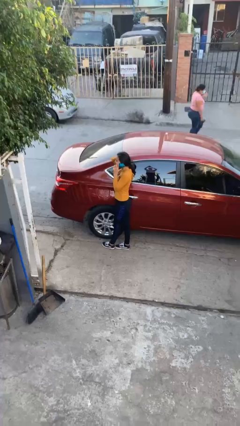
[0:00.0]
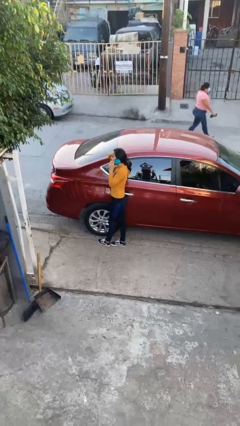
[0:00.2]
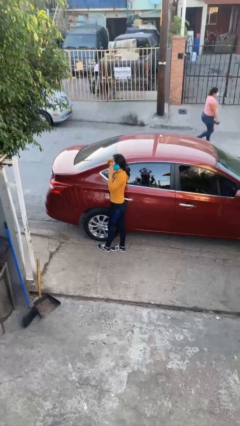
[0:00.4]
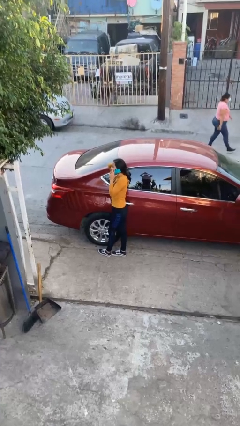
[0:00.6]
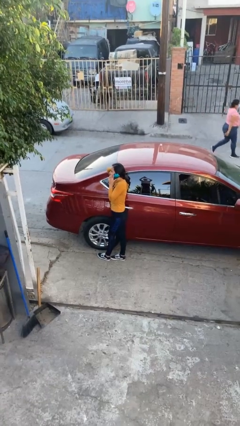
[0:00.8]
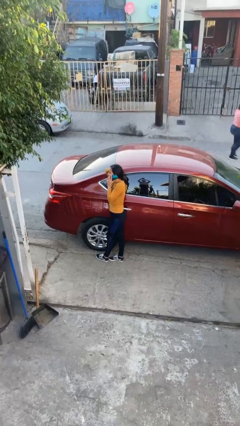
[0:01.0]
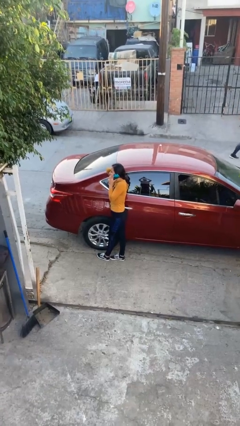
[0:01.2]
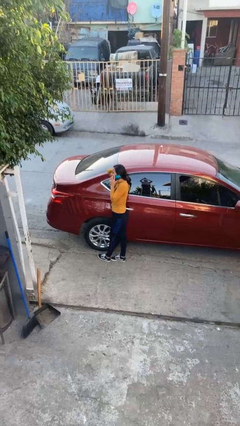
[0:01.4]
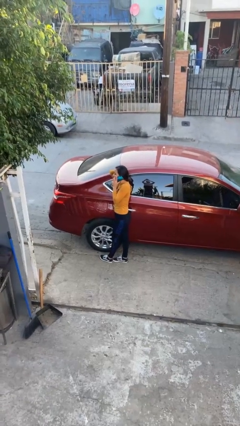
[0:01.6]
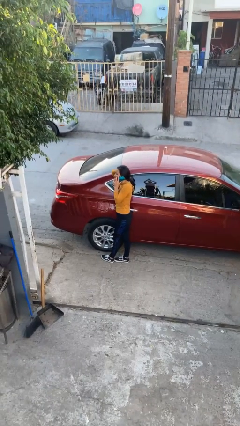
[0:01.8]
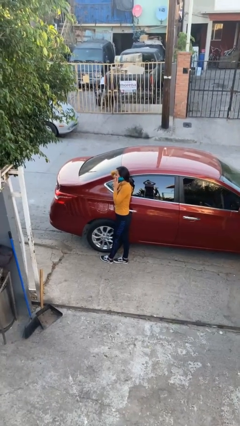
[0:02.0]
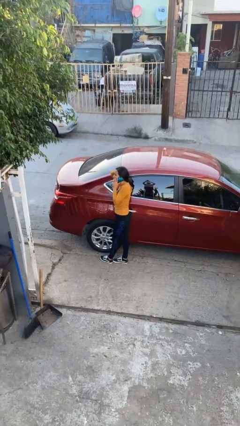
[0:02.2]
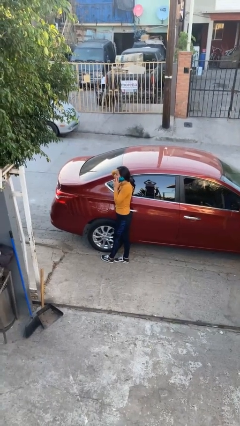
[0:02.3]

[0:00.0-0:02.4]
person leans against car

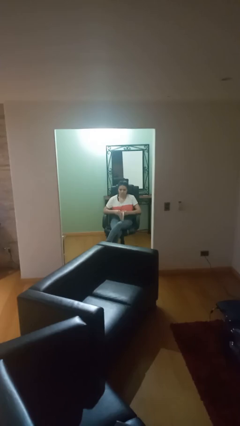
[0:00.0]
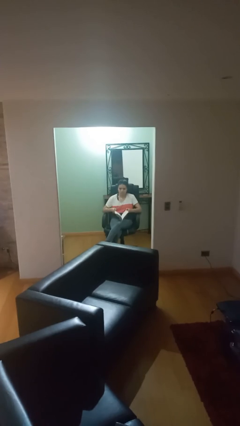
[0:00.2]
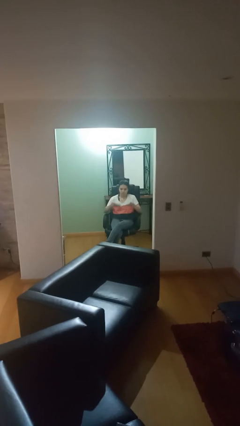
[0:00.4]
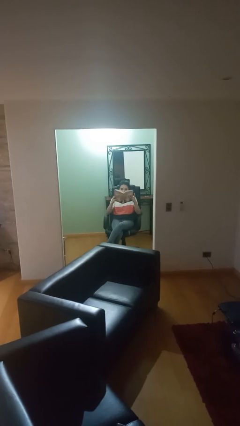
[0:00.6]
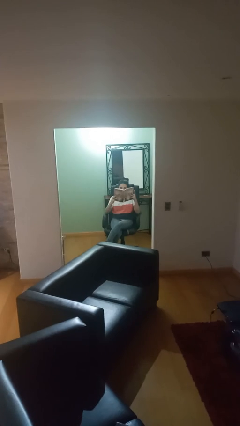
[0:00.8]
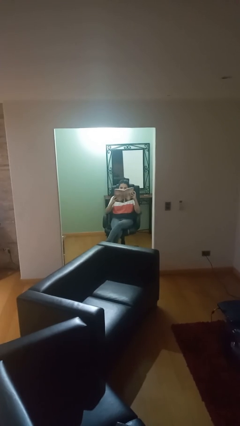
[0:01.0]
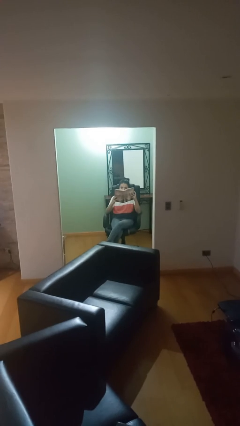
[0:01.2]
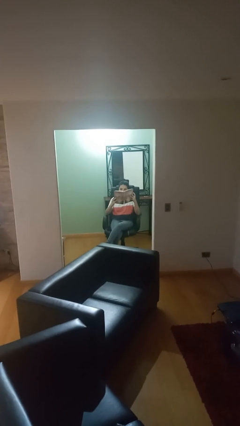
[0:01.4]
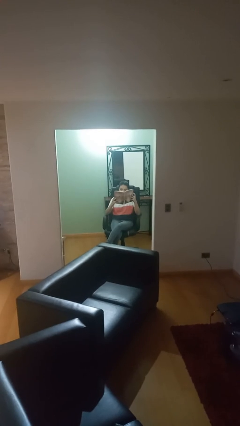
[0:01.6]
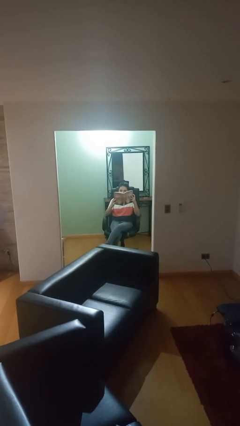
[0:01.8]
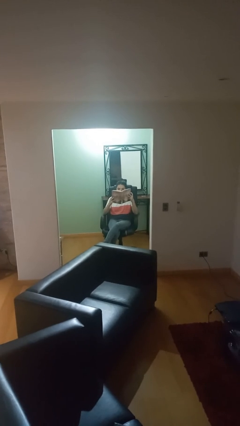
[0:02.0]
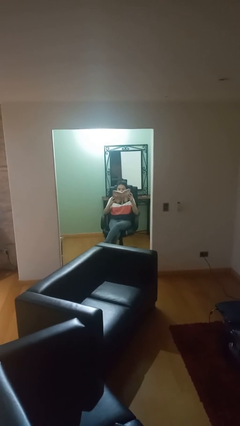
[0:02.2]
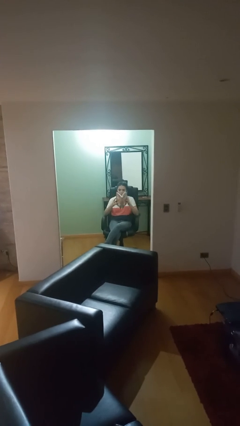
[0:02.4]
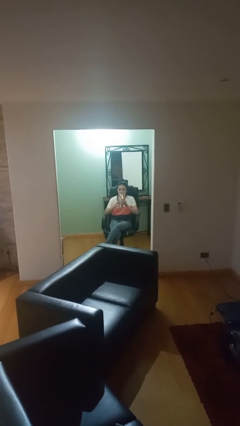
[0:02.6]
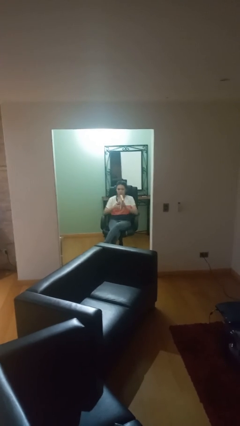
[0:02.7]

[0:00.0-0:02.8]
person reads document
